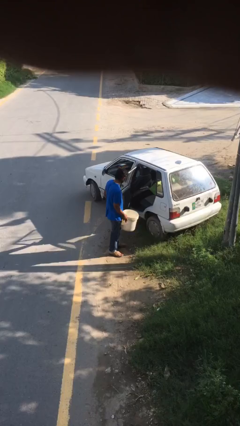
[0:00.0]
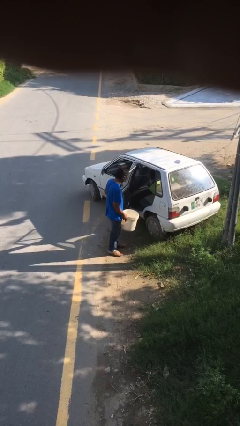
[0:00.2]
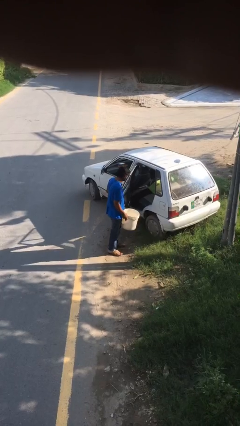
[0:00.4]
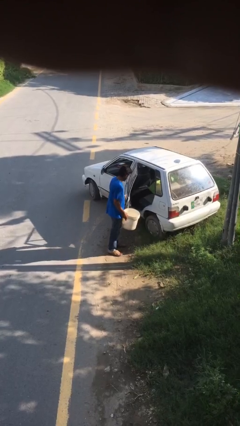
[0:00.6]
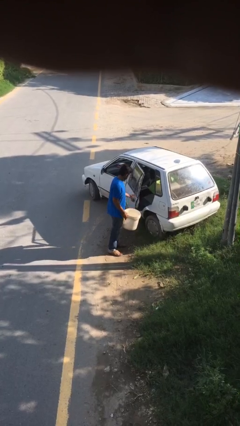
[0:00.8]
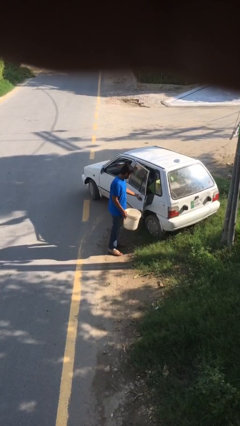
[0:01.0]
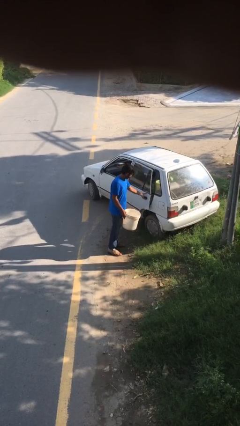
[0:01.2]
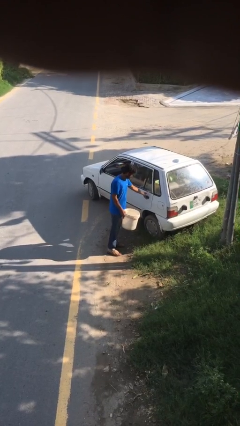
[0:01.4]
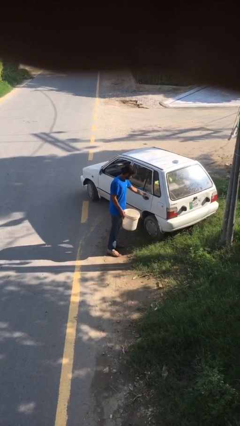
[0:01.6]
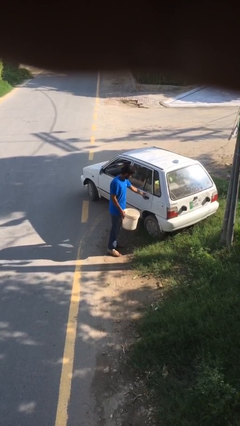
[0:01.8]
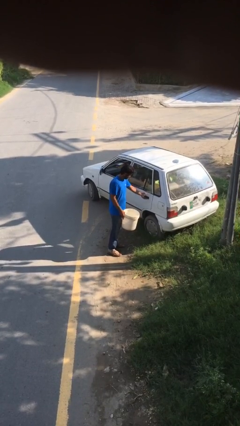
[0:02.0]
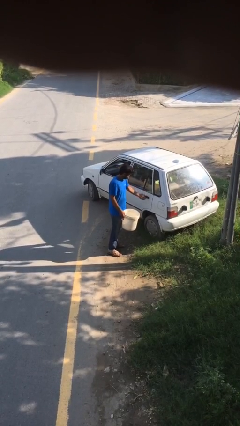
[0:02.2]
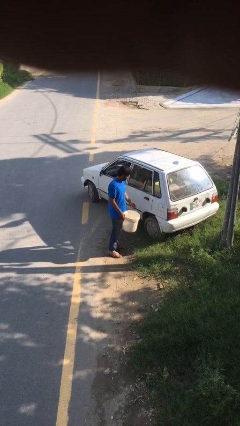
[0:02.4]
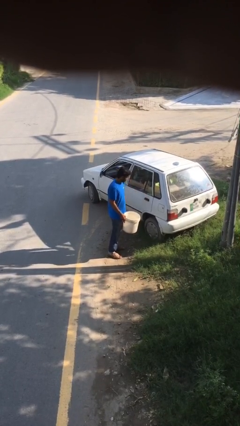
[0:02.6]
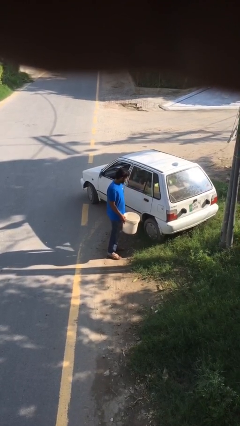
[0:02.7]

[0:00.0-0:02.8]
person closes car door

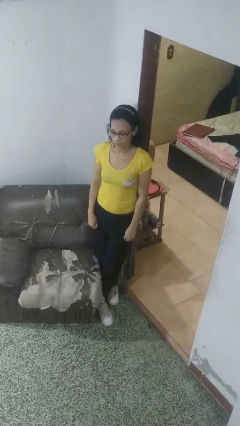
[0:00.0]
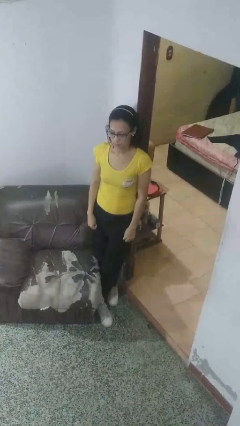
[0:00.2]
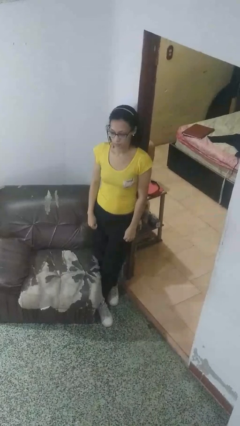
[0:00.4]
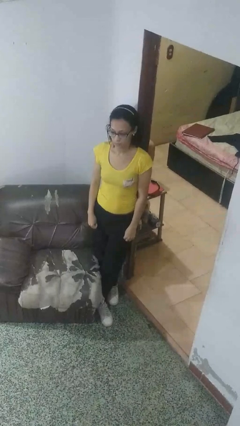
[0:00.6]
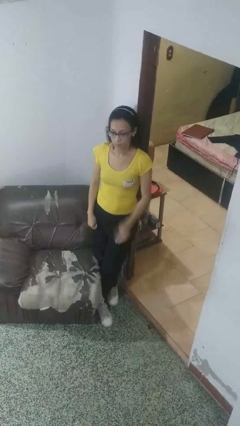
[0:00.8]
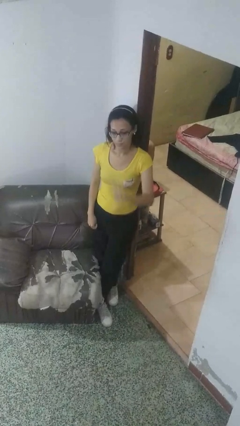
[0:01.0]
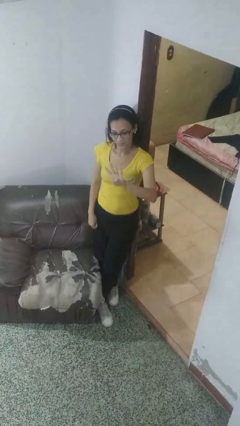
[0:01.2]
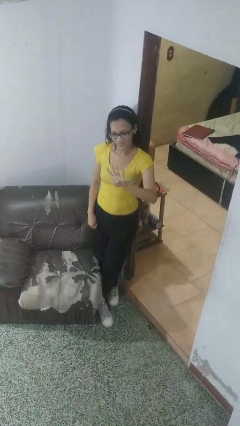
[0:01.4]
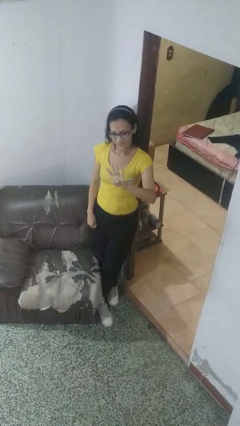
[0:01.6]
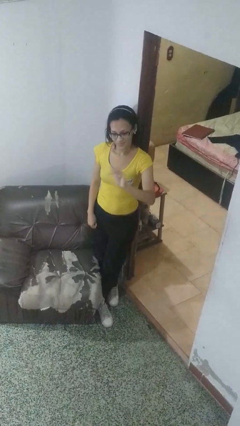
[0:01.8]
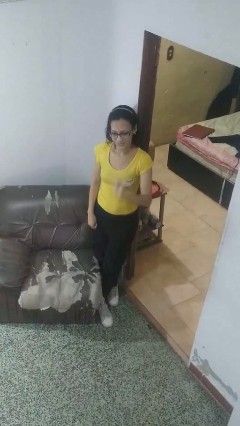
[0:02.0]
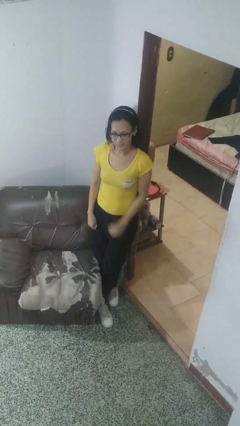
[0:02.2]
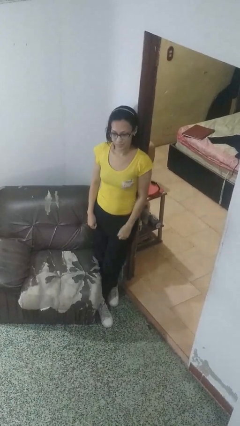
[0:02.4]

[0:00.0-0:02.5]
person gestures number four

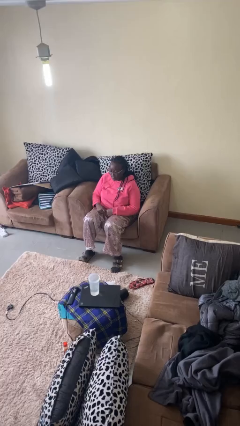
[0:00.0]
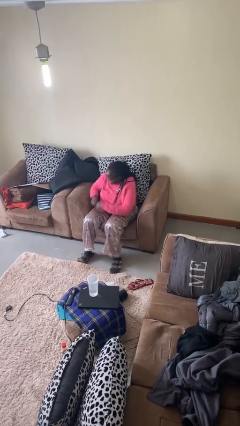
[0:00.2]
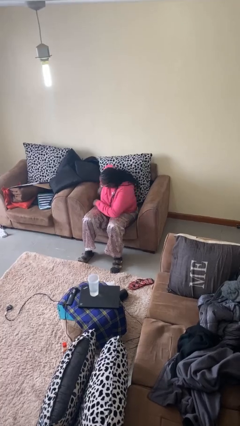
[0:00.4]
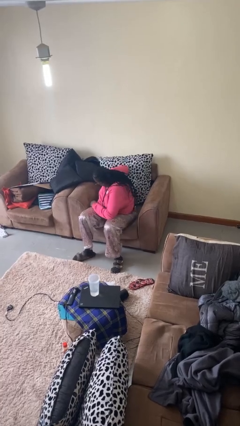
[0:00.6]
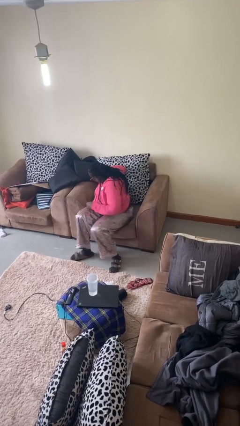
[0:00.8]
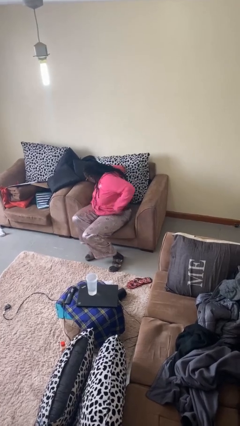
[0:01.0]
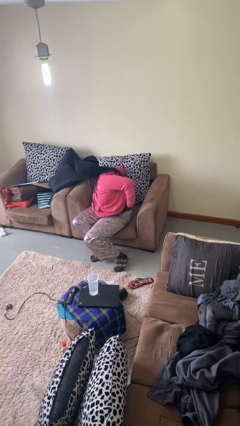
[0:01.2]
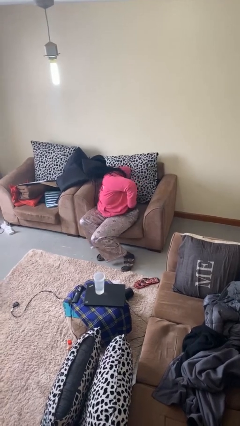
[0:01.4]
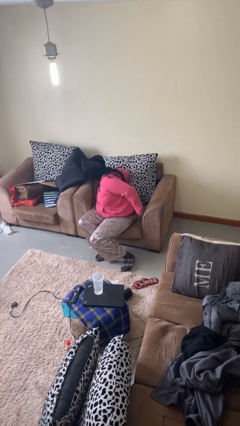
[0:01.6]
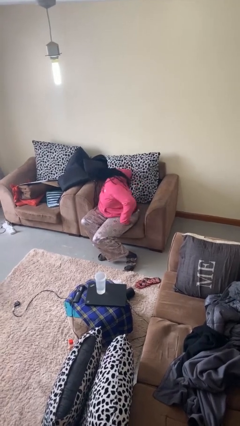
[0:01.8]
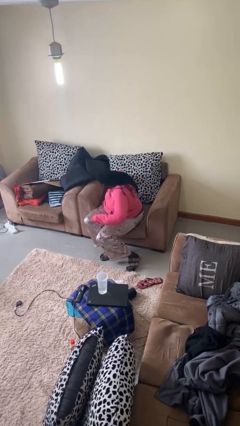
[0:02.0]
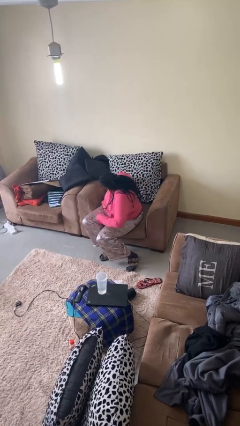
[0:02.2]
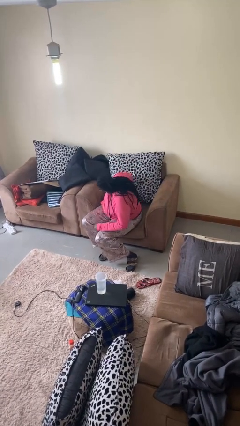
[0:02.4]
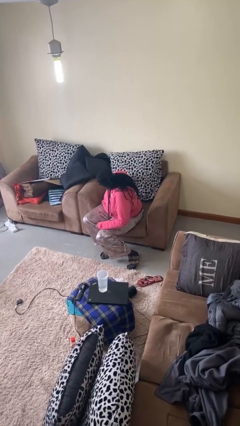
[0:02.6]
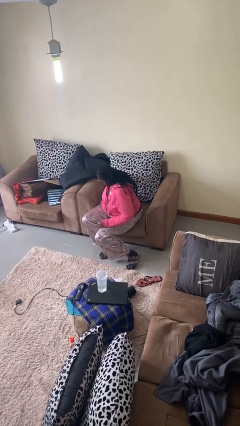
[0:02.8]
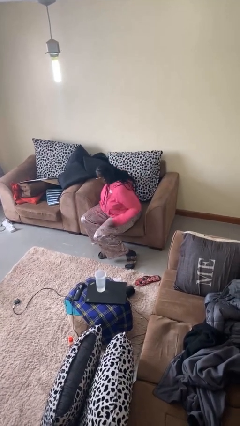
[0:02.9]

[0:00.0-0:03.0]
person searches in couch

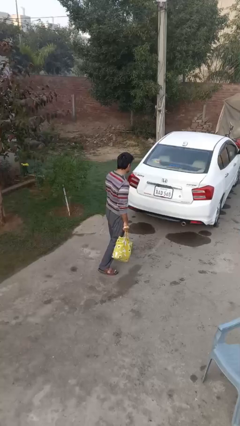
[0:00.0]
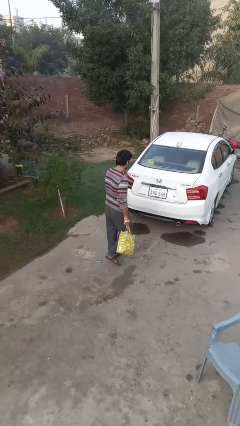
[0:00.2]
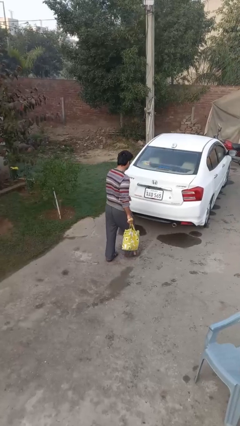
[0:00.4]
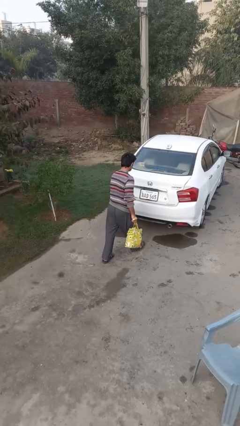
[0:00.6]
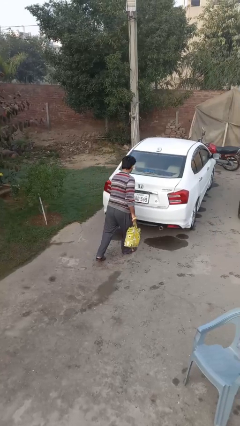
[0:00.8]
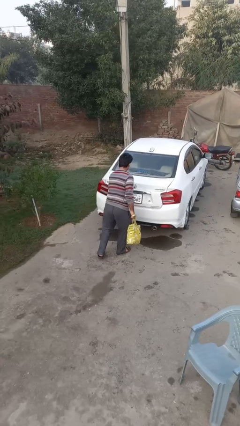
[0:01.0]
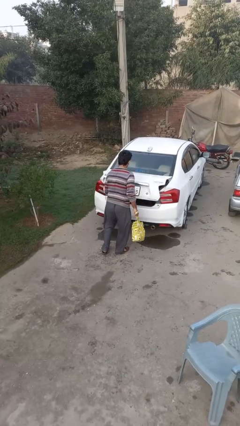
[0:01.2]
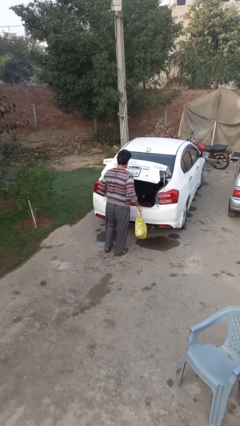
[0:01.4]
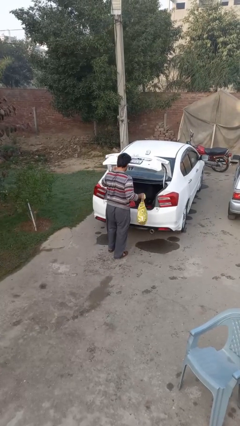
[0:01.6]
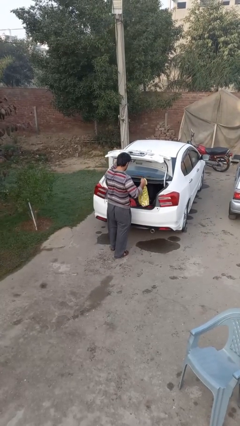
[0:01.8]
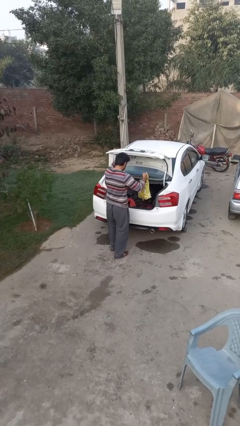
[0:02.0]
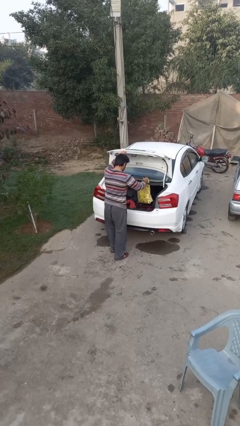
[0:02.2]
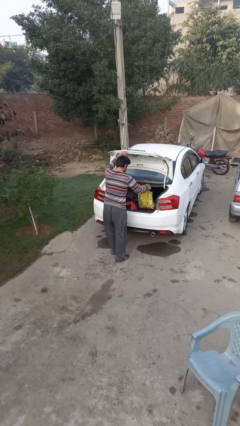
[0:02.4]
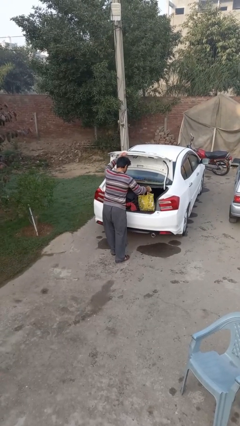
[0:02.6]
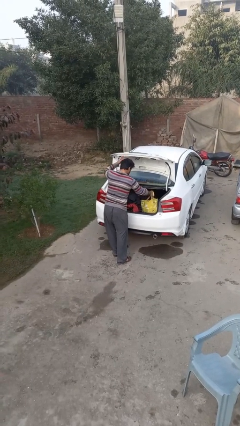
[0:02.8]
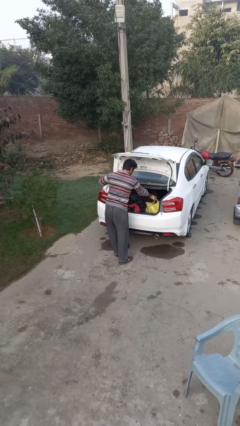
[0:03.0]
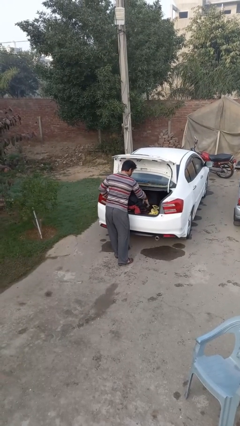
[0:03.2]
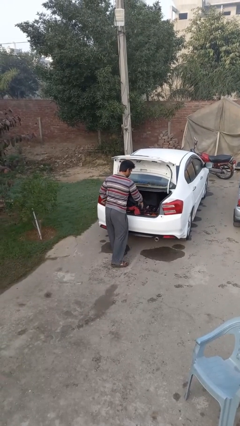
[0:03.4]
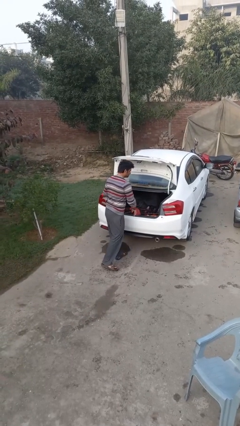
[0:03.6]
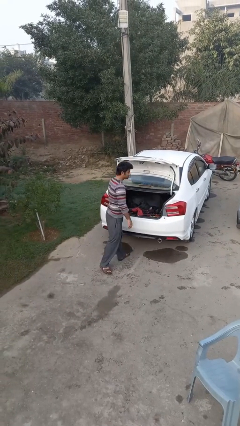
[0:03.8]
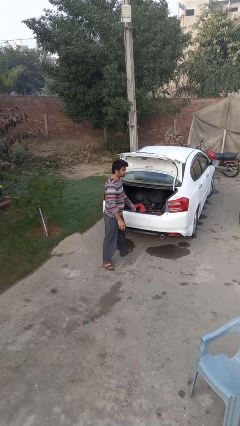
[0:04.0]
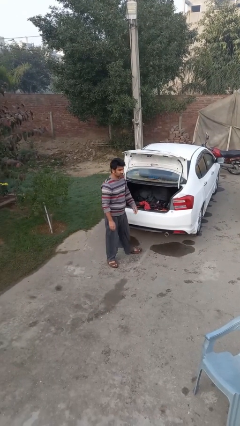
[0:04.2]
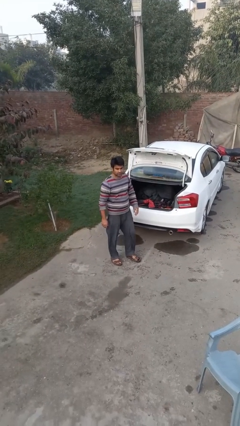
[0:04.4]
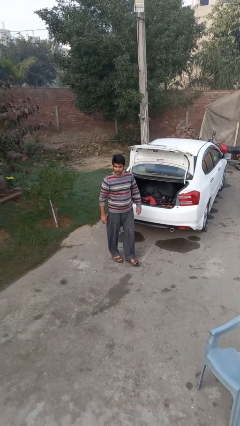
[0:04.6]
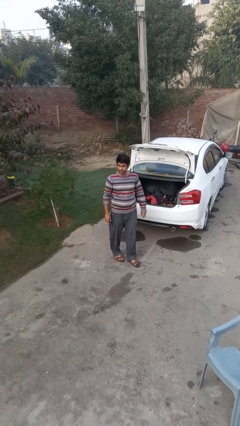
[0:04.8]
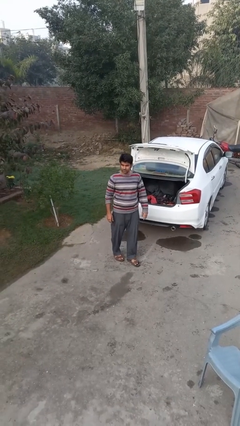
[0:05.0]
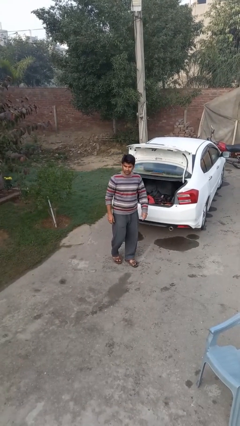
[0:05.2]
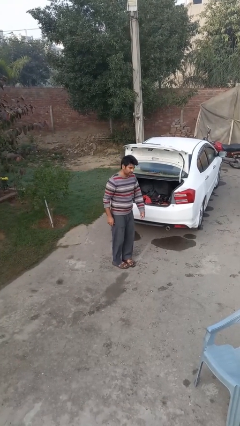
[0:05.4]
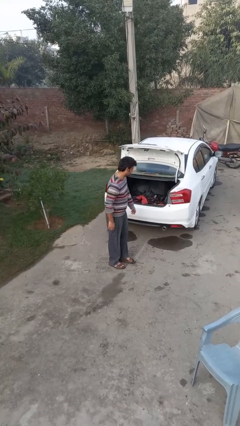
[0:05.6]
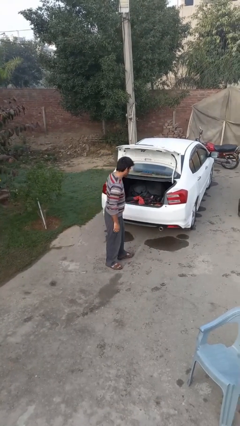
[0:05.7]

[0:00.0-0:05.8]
person loads car

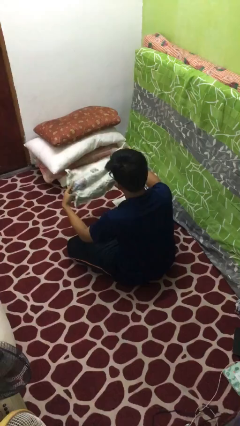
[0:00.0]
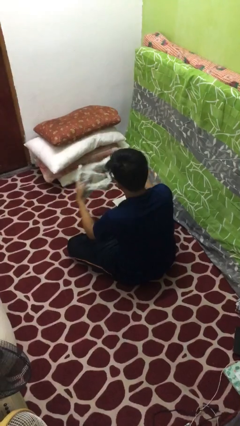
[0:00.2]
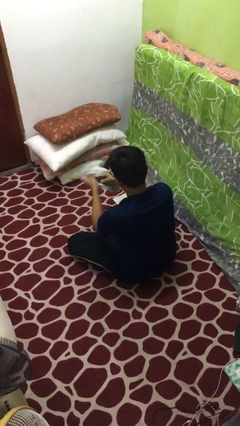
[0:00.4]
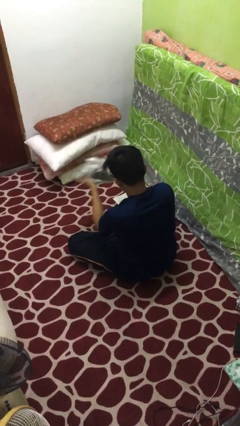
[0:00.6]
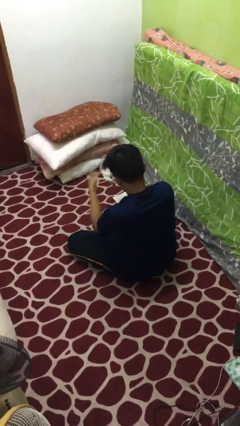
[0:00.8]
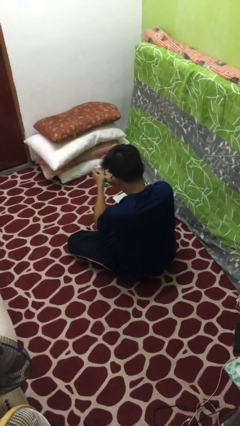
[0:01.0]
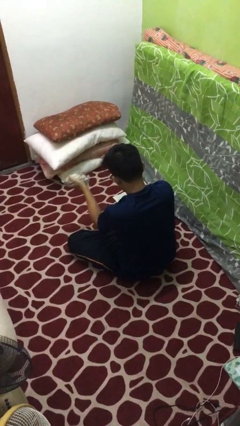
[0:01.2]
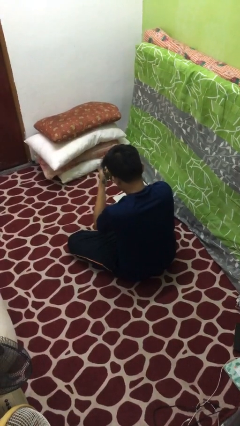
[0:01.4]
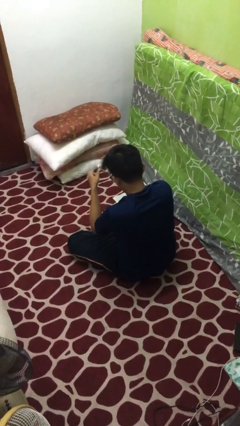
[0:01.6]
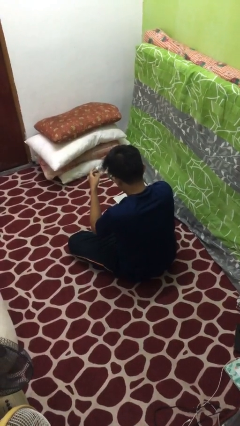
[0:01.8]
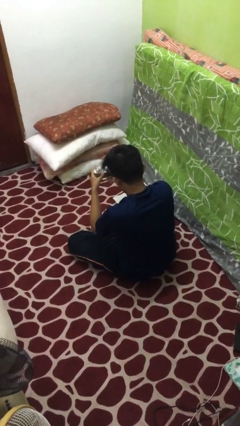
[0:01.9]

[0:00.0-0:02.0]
person crumples paper

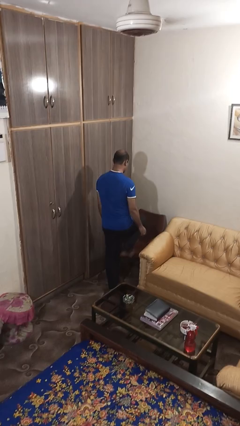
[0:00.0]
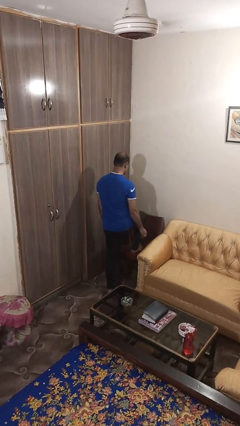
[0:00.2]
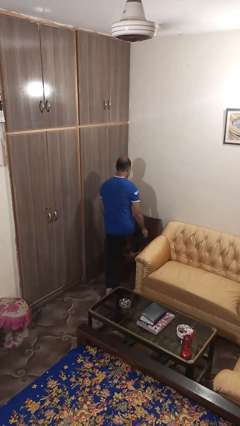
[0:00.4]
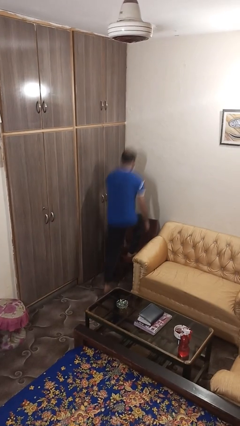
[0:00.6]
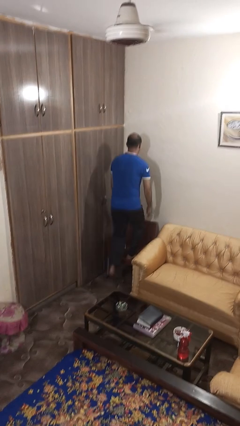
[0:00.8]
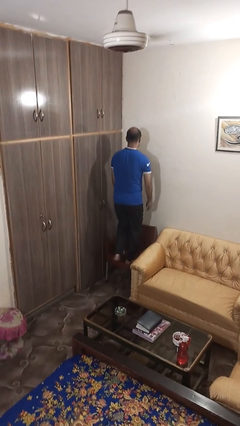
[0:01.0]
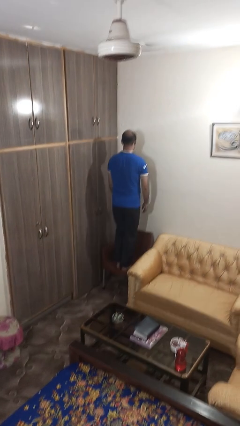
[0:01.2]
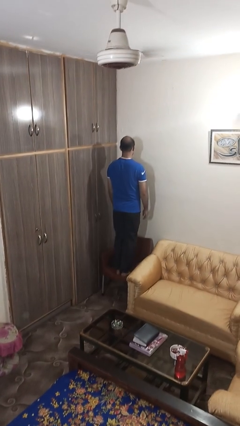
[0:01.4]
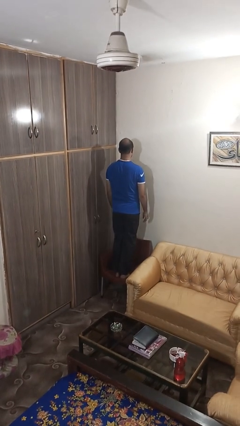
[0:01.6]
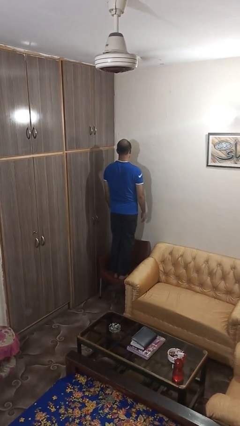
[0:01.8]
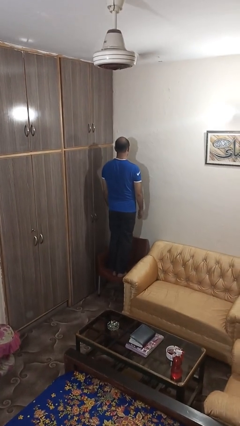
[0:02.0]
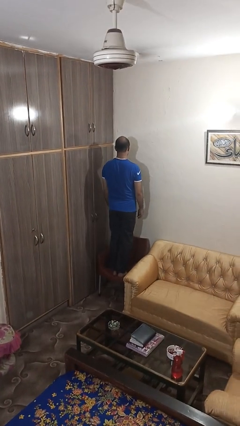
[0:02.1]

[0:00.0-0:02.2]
person climbs on chair
